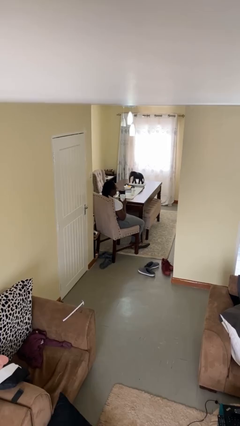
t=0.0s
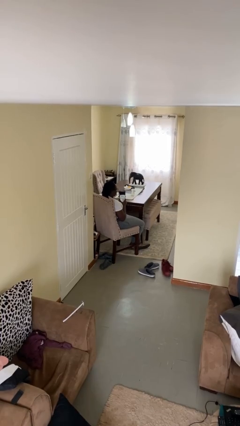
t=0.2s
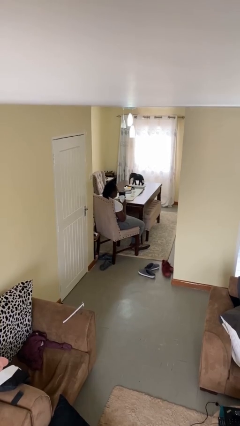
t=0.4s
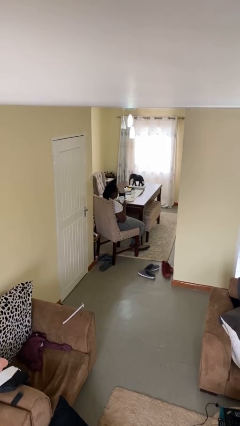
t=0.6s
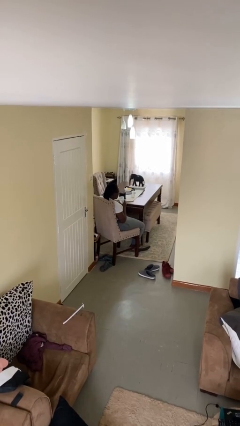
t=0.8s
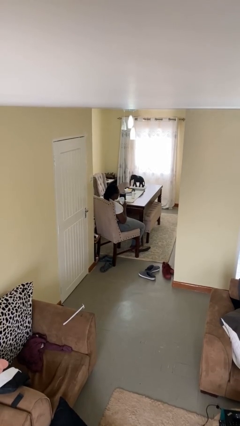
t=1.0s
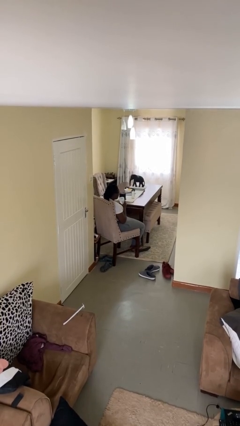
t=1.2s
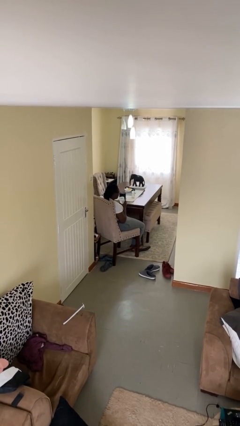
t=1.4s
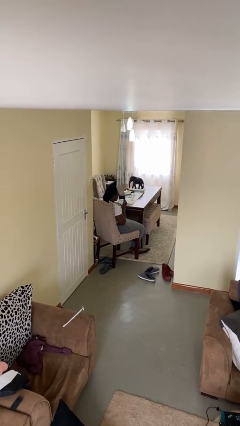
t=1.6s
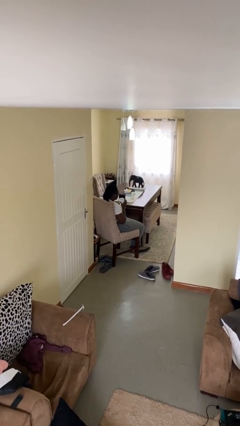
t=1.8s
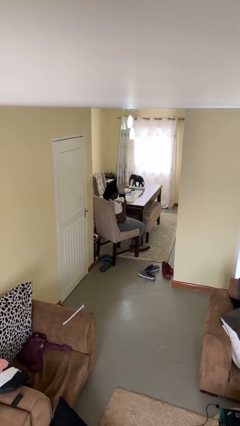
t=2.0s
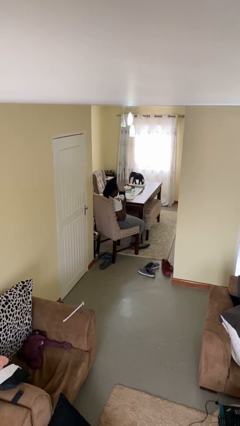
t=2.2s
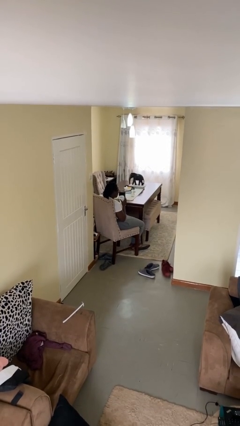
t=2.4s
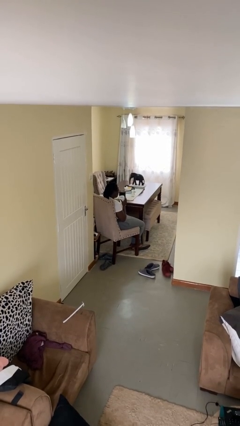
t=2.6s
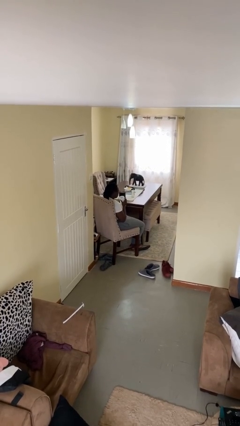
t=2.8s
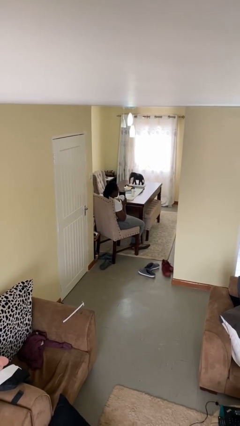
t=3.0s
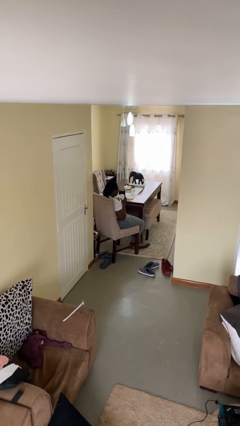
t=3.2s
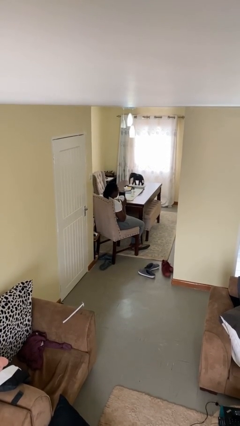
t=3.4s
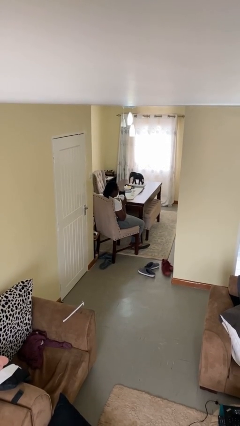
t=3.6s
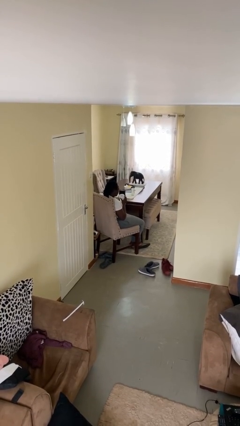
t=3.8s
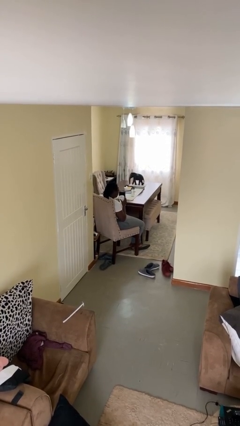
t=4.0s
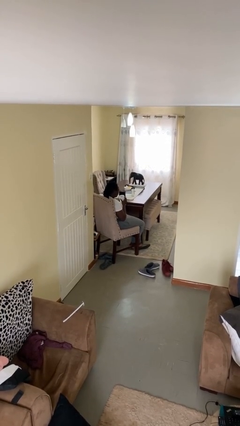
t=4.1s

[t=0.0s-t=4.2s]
person drinks from straw

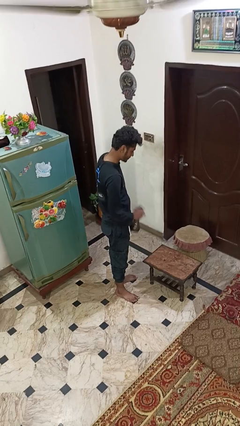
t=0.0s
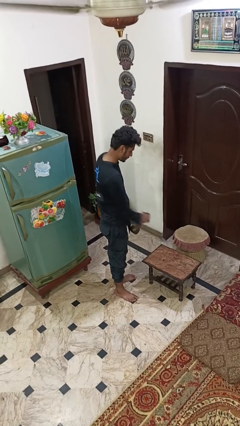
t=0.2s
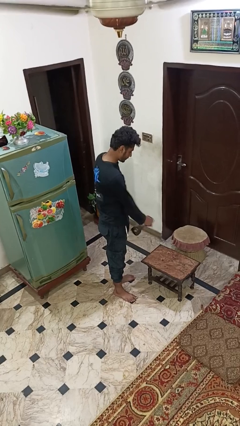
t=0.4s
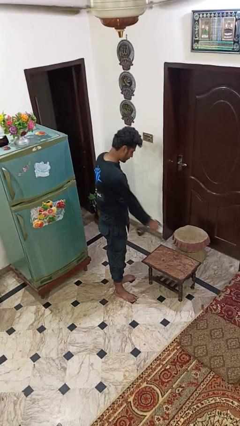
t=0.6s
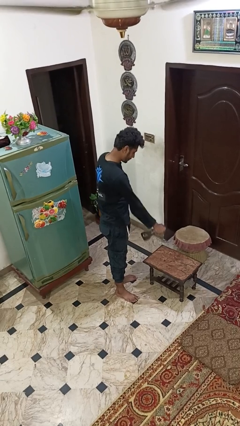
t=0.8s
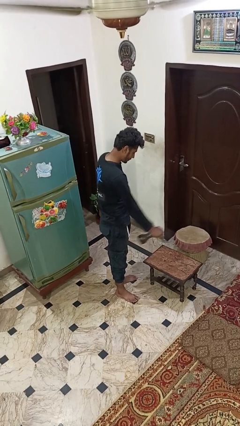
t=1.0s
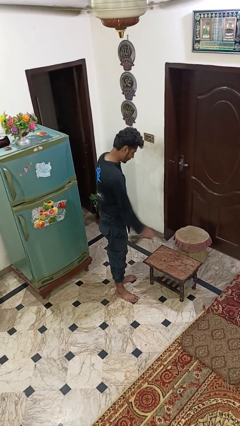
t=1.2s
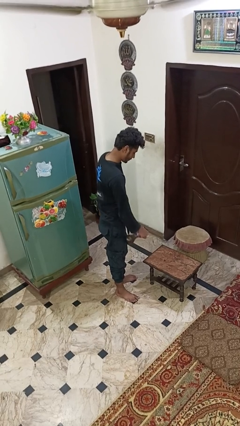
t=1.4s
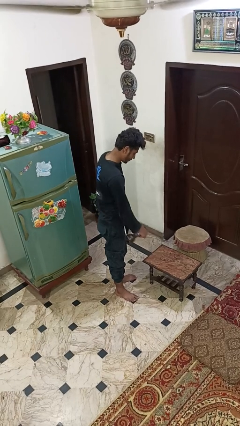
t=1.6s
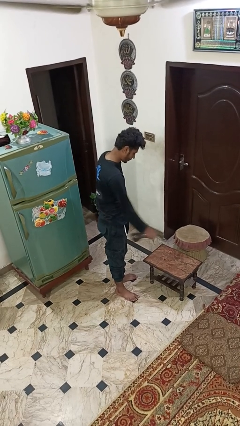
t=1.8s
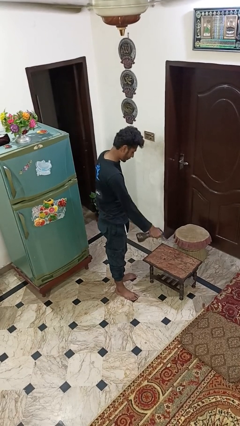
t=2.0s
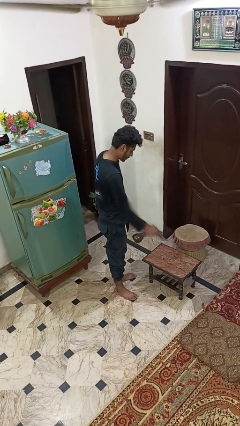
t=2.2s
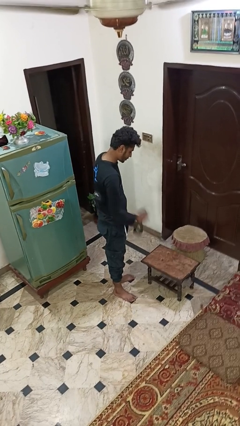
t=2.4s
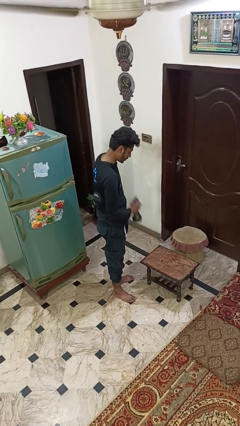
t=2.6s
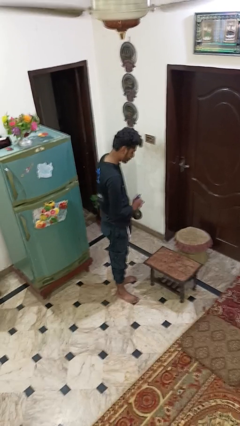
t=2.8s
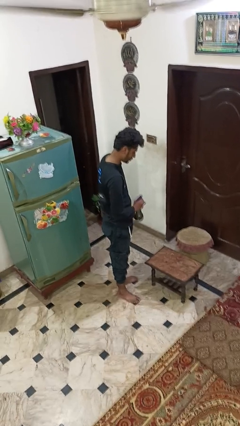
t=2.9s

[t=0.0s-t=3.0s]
person sprays from bottle

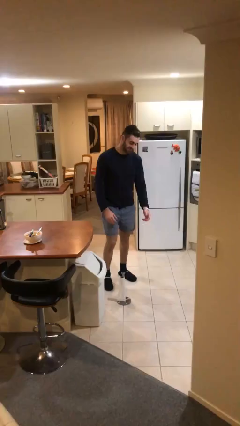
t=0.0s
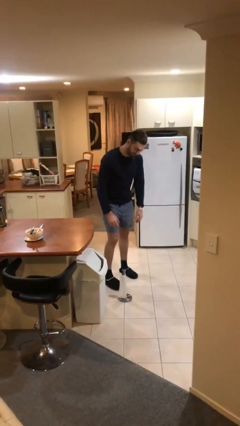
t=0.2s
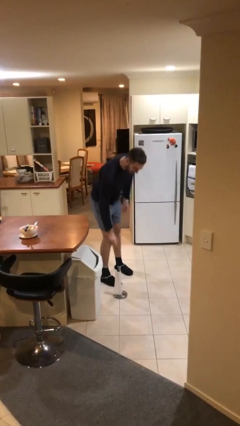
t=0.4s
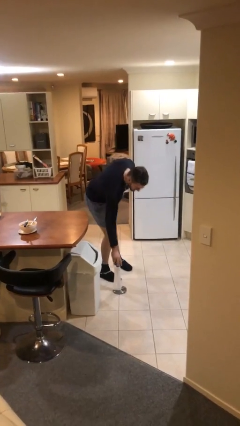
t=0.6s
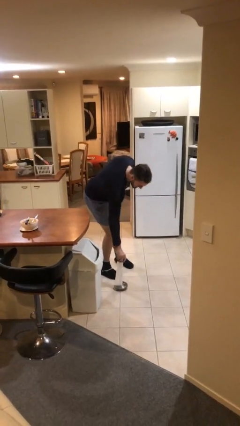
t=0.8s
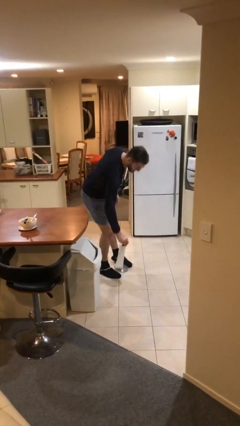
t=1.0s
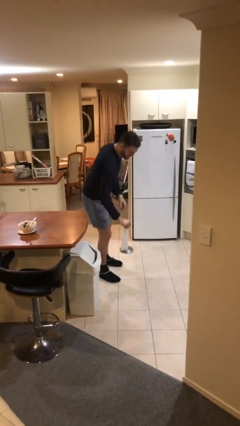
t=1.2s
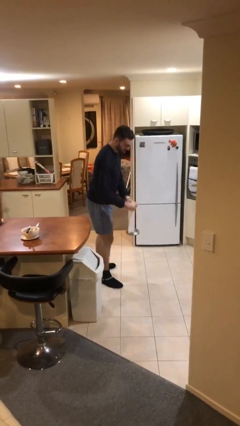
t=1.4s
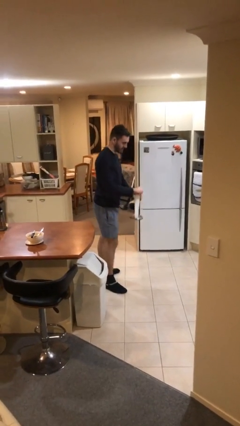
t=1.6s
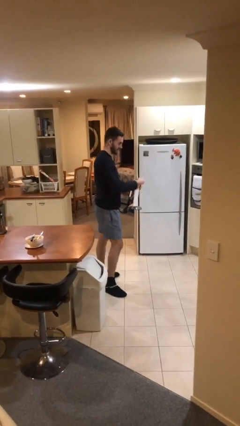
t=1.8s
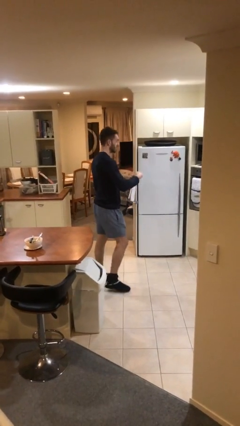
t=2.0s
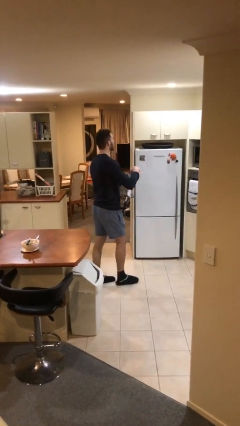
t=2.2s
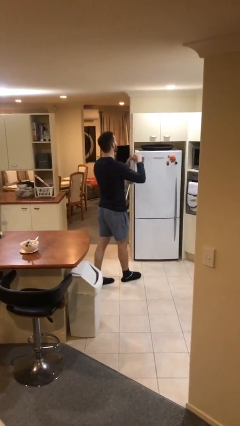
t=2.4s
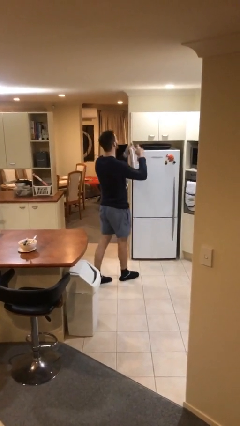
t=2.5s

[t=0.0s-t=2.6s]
person picks up object from floor

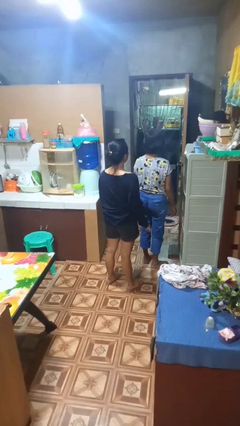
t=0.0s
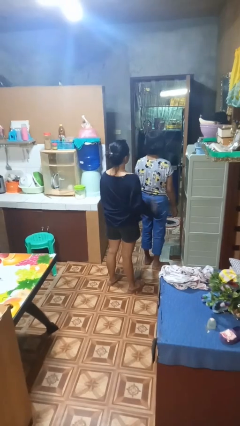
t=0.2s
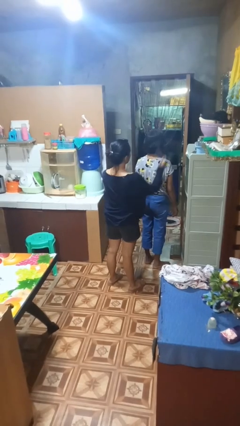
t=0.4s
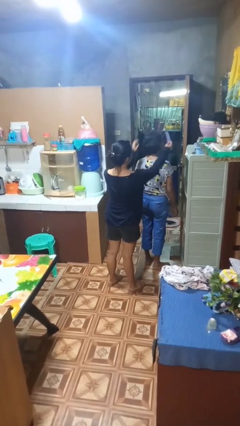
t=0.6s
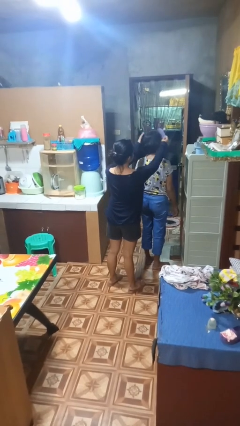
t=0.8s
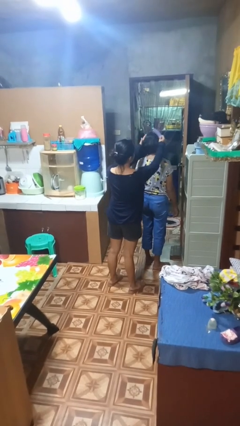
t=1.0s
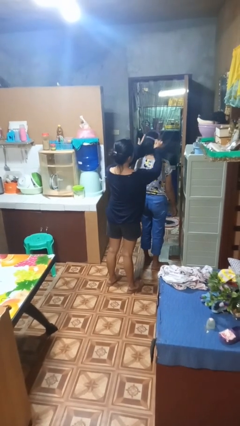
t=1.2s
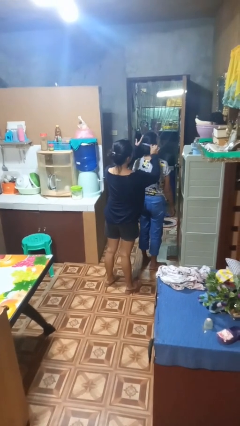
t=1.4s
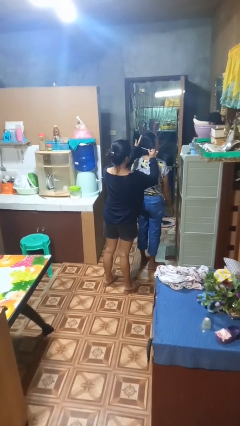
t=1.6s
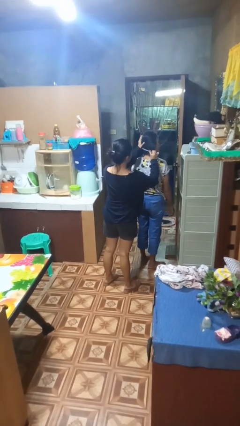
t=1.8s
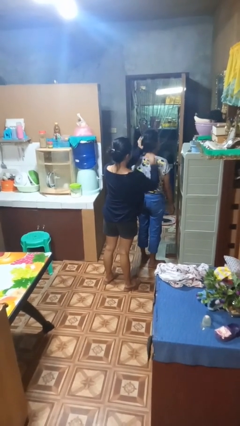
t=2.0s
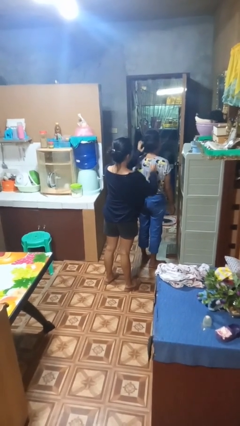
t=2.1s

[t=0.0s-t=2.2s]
person brushes hair of person

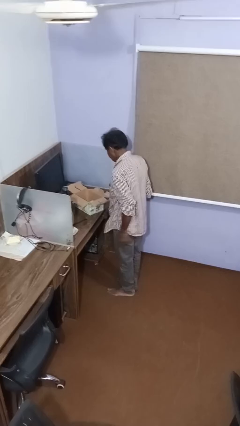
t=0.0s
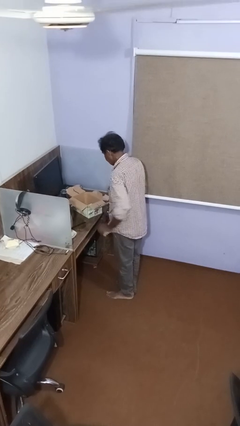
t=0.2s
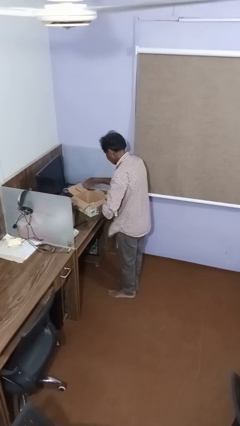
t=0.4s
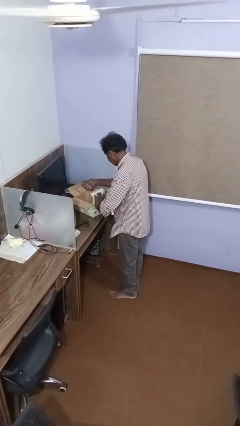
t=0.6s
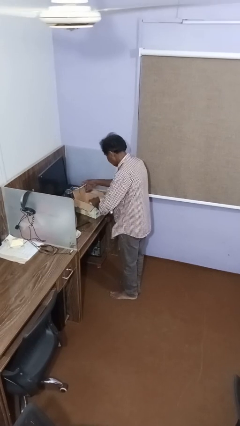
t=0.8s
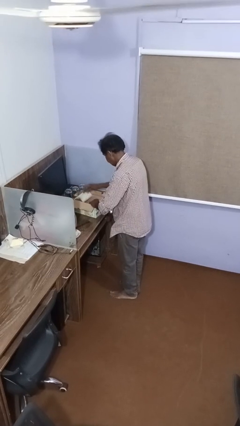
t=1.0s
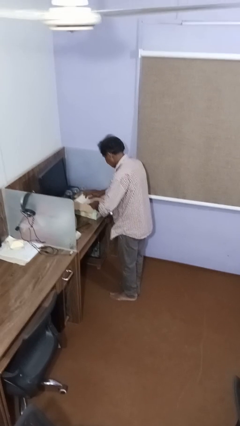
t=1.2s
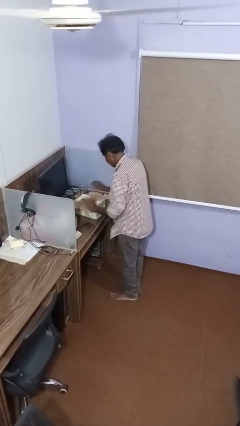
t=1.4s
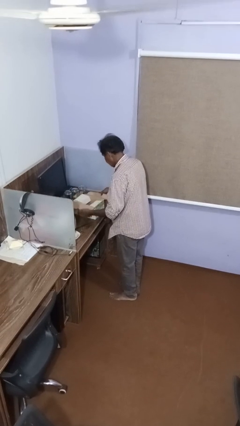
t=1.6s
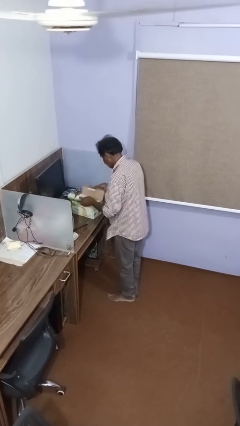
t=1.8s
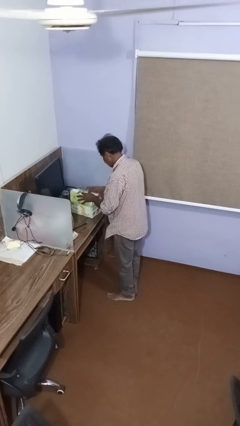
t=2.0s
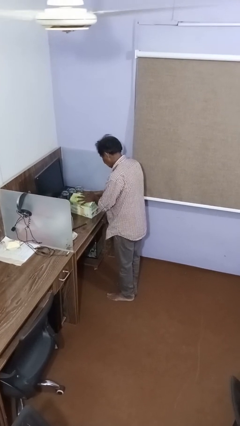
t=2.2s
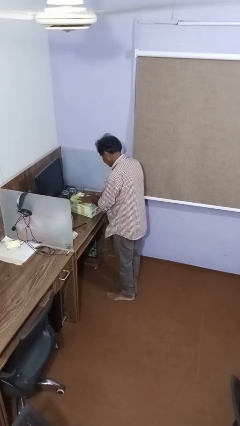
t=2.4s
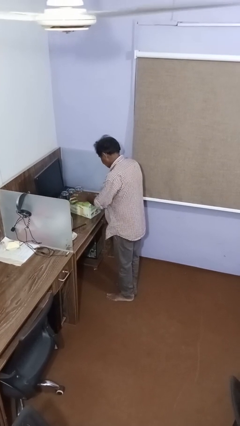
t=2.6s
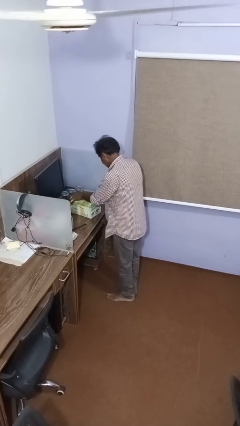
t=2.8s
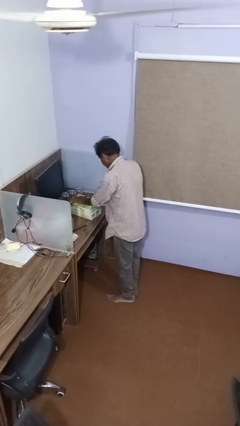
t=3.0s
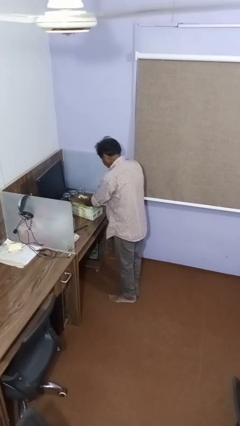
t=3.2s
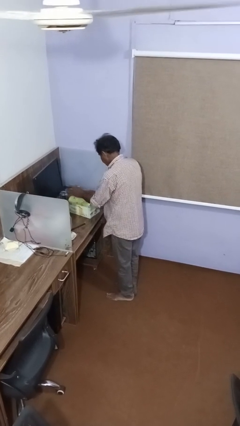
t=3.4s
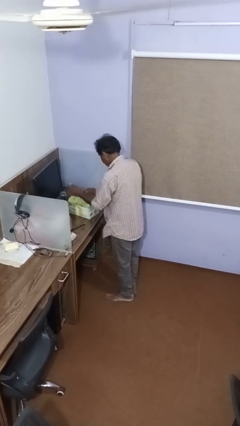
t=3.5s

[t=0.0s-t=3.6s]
person closes box

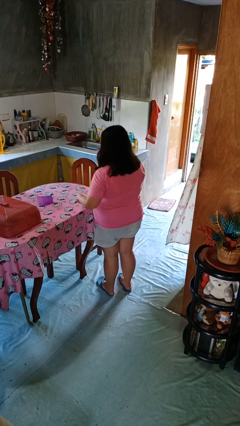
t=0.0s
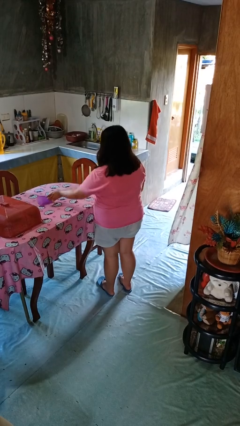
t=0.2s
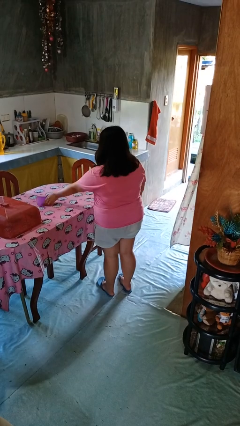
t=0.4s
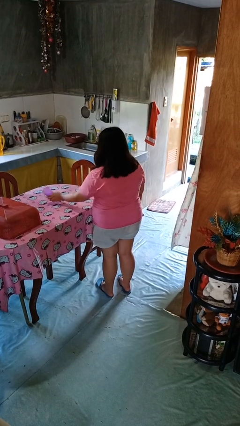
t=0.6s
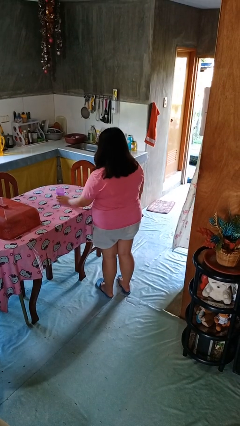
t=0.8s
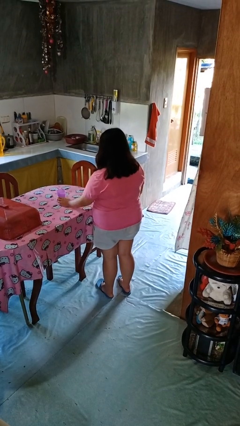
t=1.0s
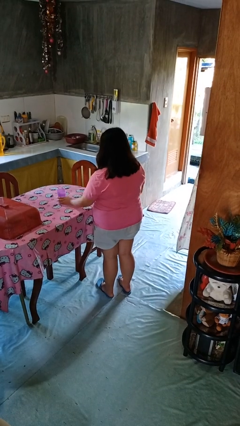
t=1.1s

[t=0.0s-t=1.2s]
person sets upright glass

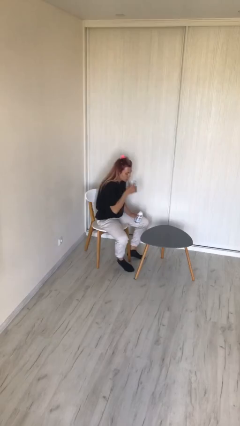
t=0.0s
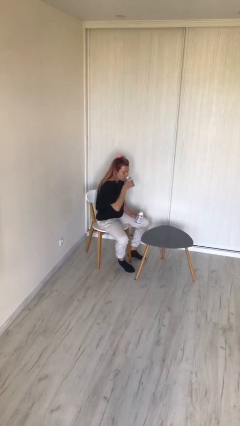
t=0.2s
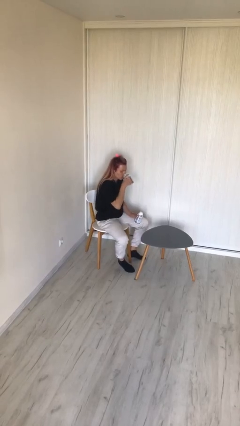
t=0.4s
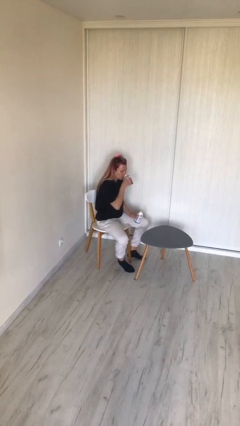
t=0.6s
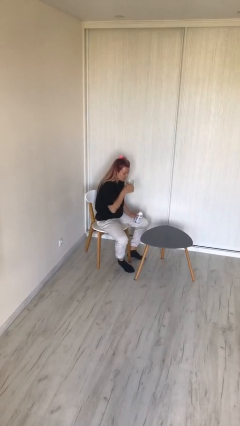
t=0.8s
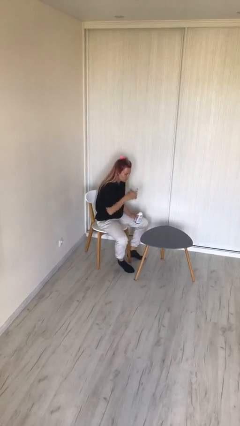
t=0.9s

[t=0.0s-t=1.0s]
person drinks from cup
